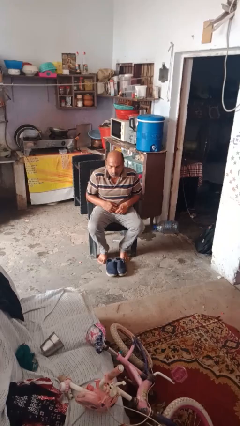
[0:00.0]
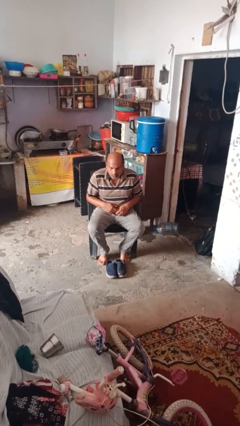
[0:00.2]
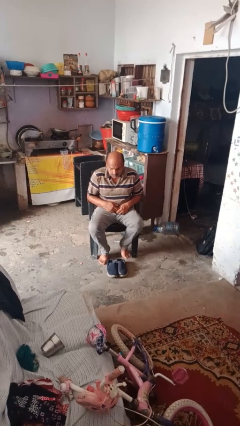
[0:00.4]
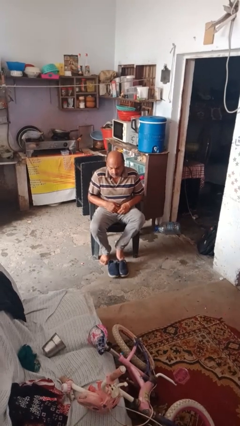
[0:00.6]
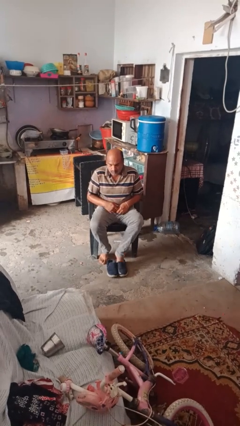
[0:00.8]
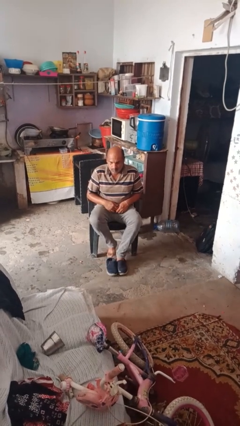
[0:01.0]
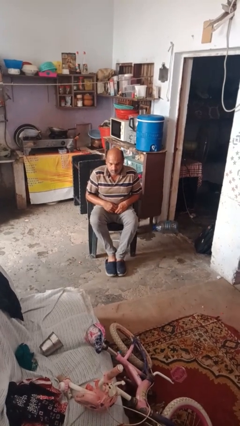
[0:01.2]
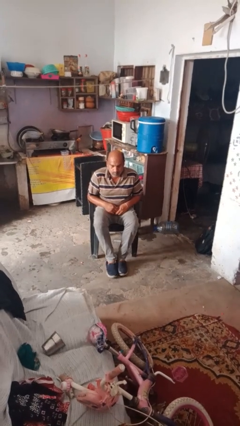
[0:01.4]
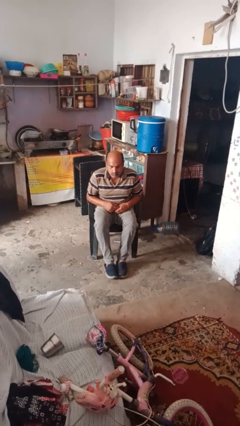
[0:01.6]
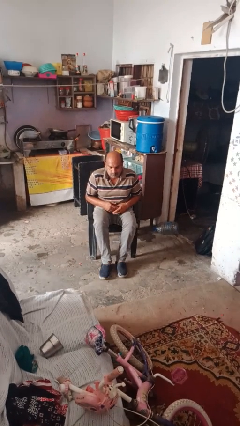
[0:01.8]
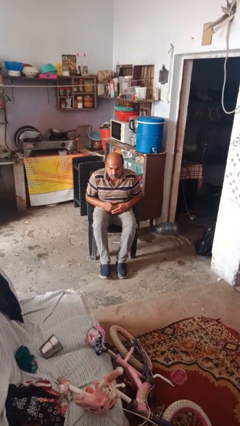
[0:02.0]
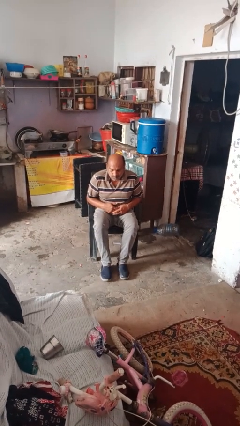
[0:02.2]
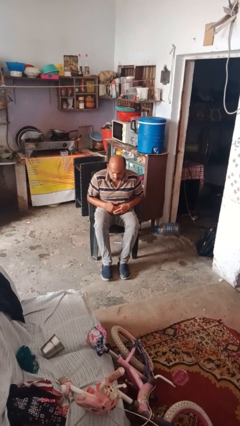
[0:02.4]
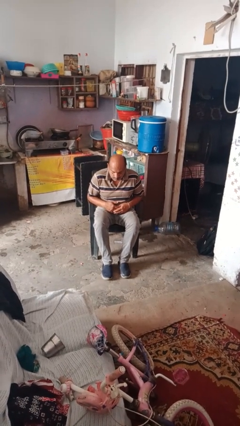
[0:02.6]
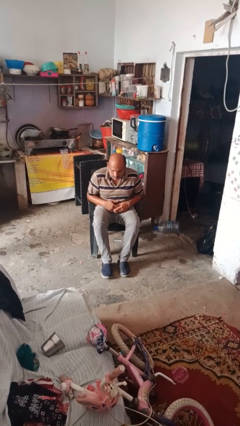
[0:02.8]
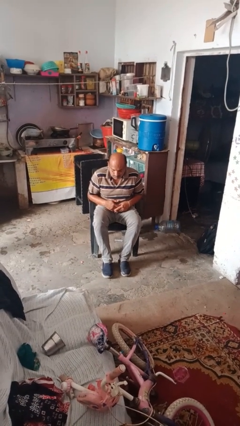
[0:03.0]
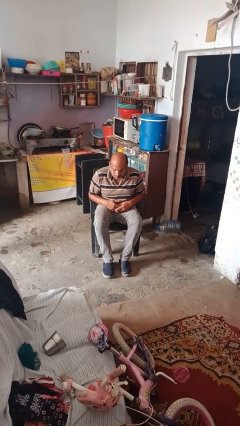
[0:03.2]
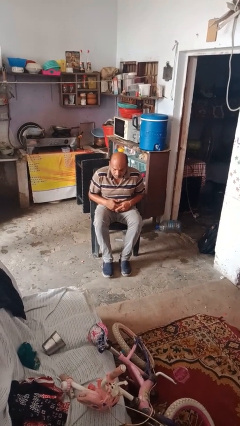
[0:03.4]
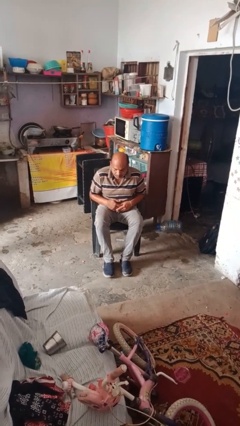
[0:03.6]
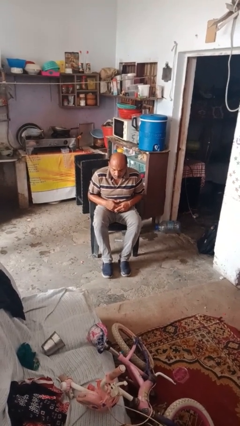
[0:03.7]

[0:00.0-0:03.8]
person puts on shoes

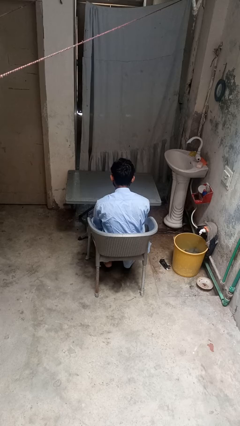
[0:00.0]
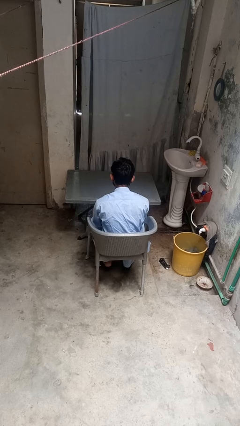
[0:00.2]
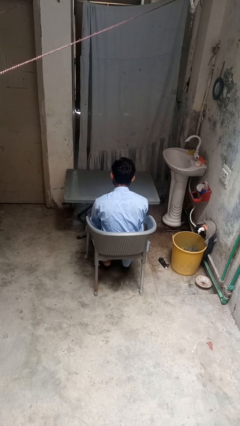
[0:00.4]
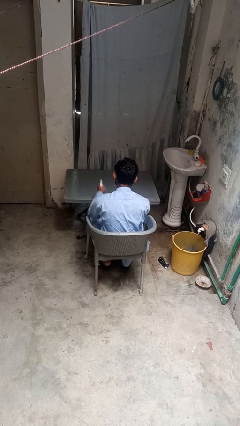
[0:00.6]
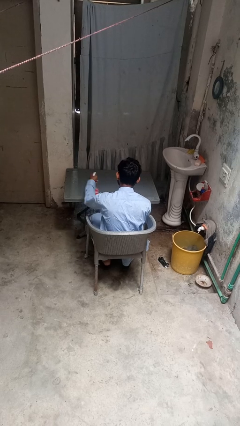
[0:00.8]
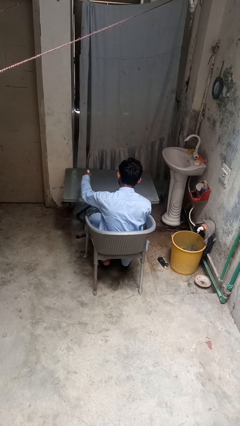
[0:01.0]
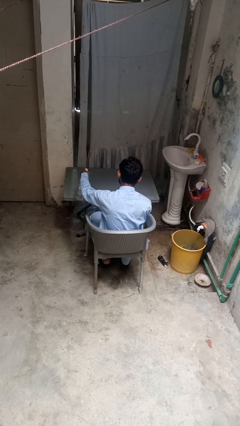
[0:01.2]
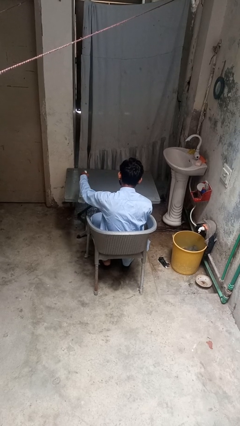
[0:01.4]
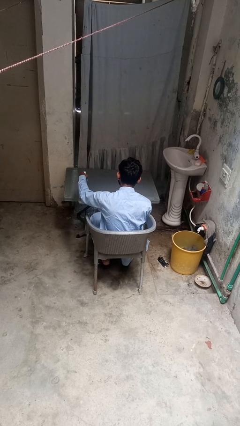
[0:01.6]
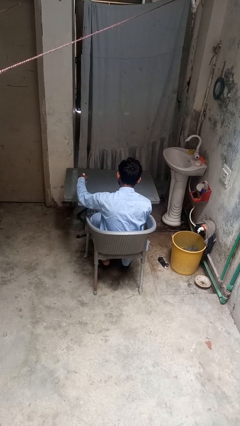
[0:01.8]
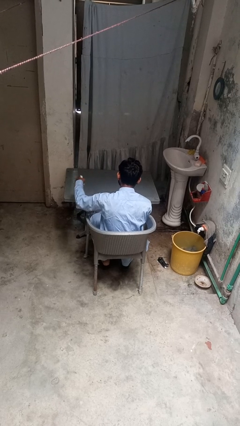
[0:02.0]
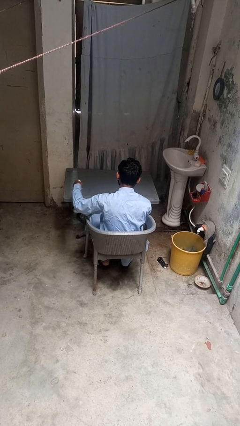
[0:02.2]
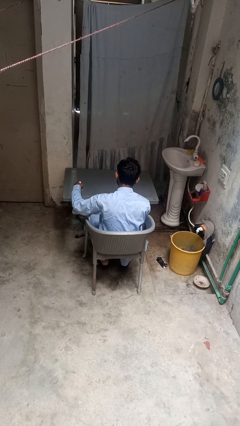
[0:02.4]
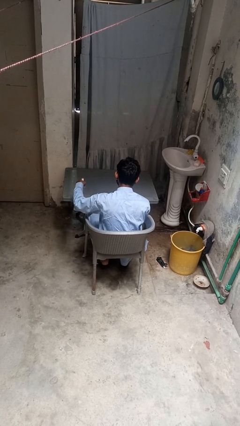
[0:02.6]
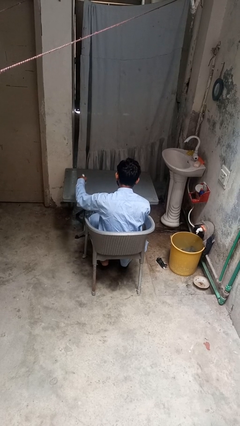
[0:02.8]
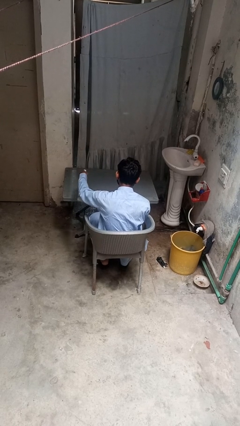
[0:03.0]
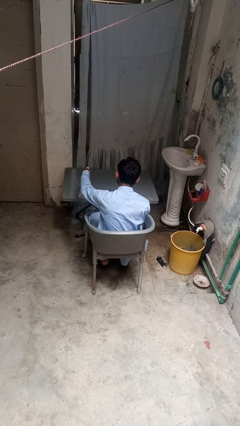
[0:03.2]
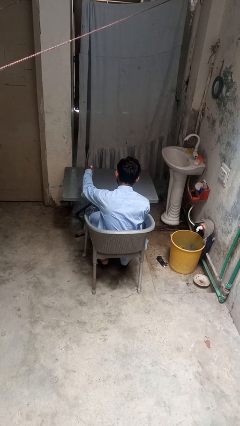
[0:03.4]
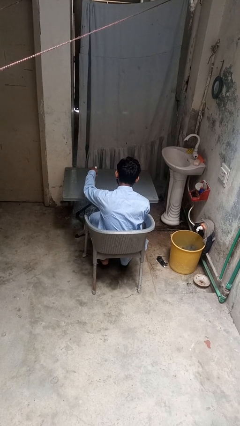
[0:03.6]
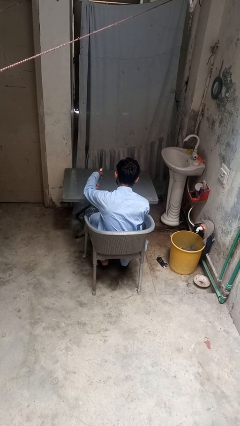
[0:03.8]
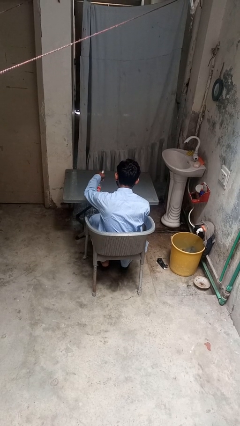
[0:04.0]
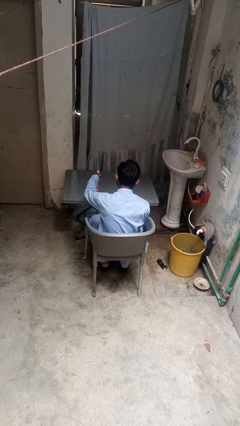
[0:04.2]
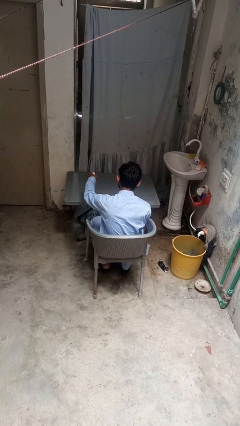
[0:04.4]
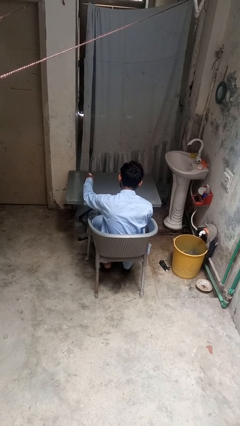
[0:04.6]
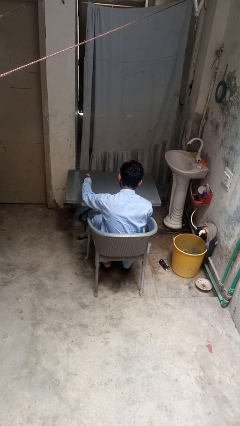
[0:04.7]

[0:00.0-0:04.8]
person sprays from bottle

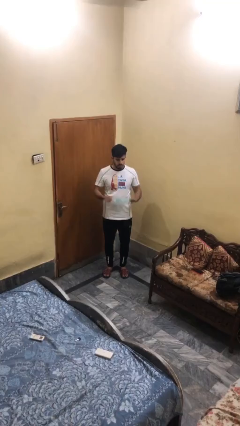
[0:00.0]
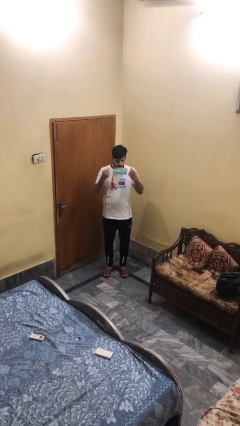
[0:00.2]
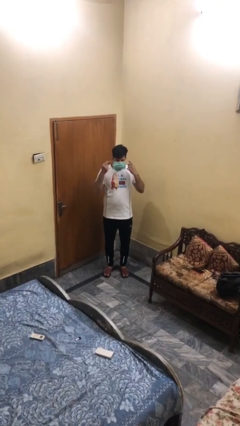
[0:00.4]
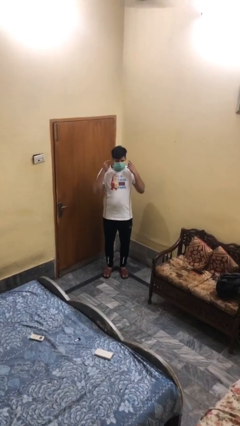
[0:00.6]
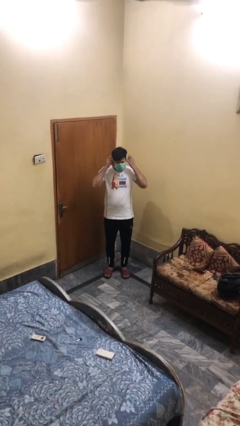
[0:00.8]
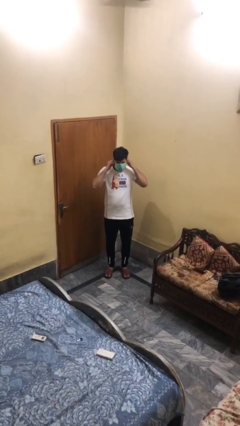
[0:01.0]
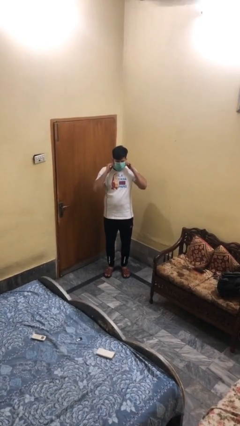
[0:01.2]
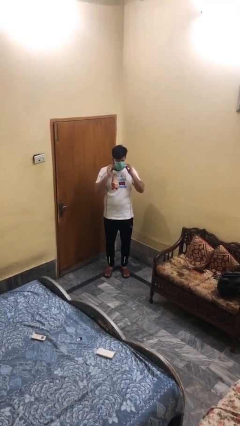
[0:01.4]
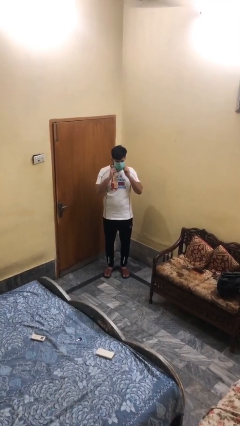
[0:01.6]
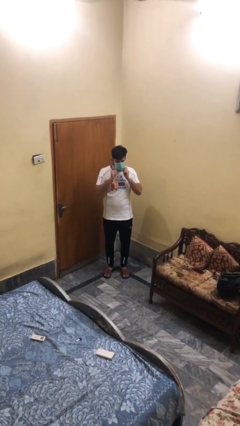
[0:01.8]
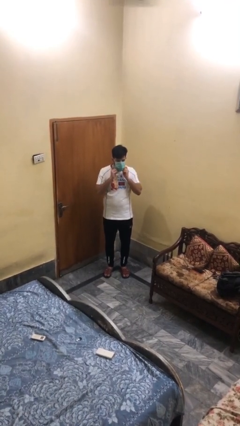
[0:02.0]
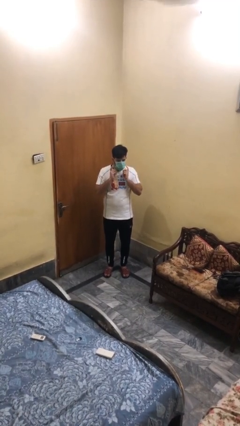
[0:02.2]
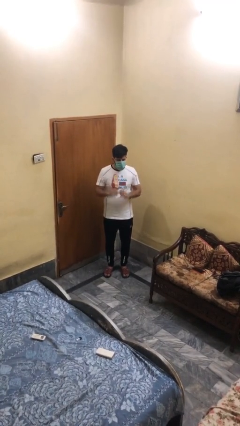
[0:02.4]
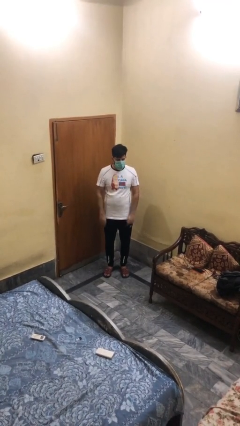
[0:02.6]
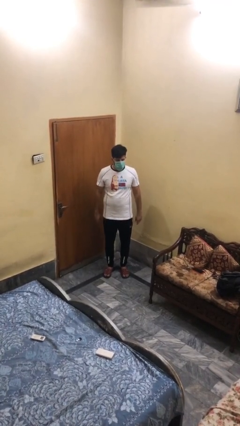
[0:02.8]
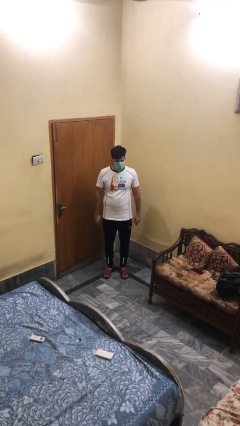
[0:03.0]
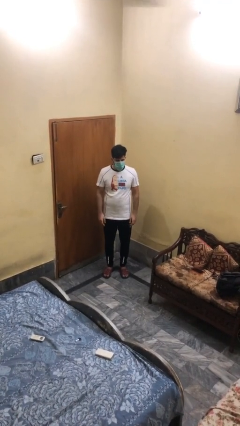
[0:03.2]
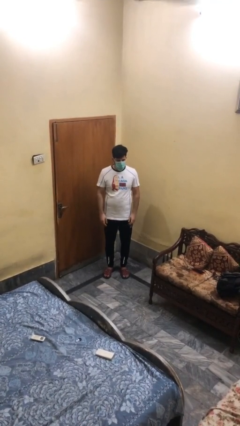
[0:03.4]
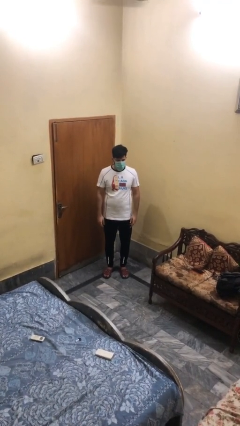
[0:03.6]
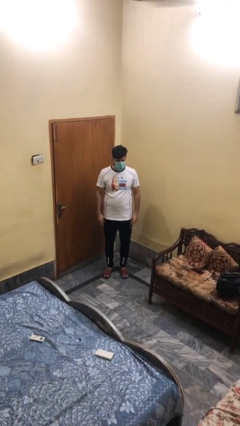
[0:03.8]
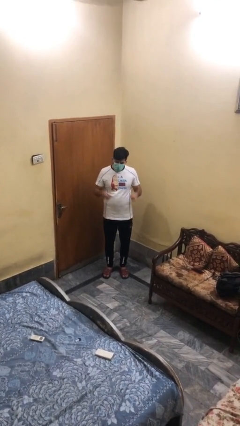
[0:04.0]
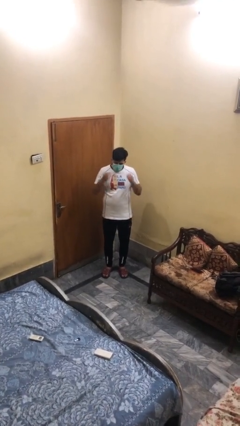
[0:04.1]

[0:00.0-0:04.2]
person puts on facemask

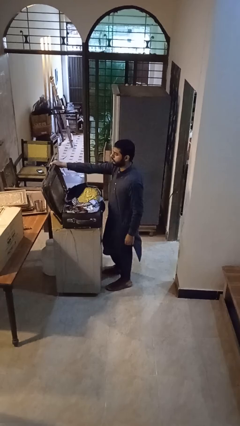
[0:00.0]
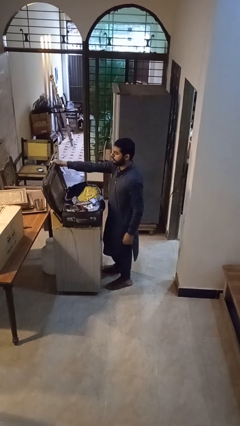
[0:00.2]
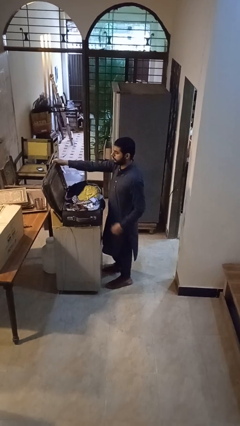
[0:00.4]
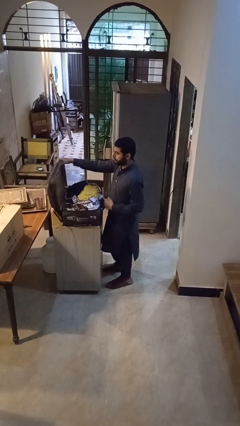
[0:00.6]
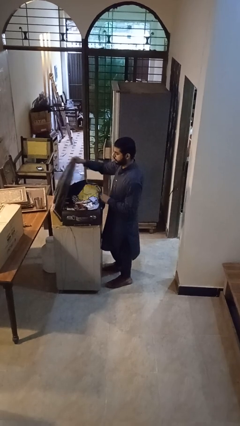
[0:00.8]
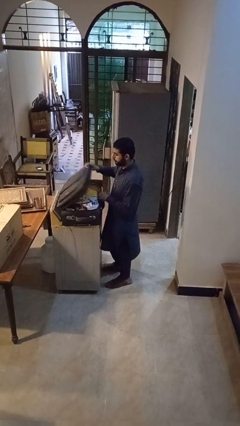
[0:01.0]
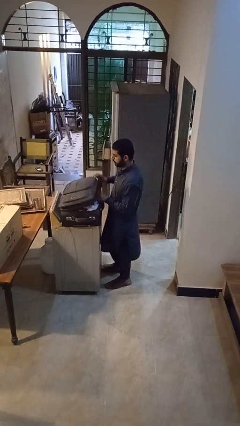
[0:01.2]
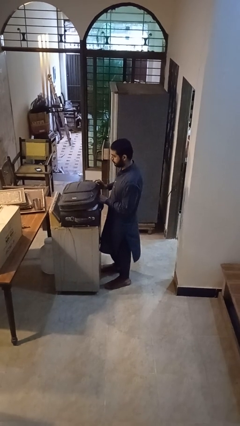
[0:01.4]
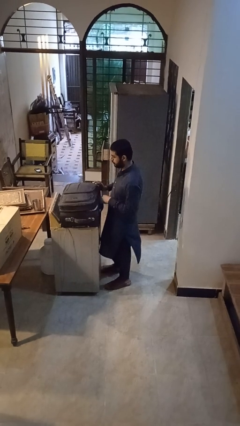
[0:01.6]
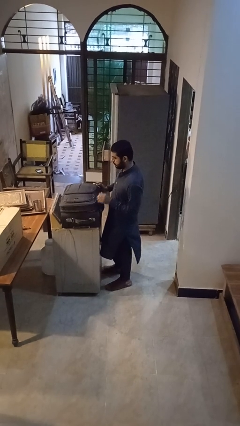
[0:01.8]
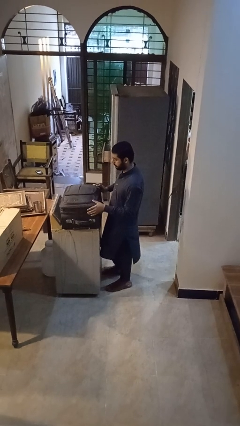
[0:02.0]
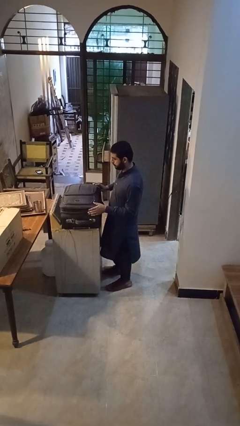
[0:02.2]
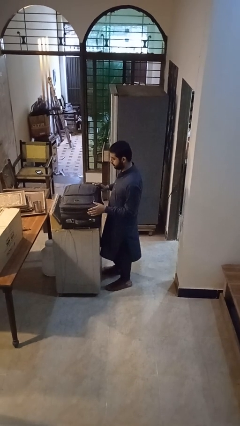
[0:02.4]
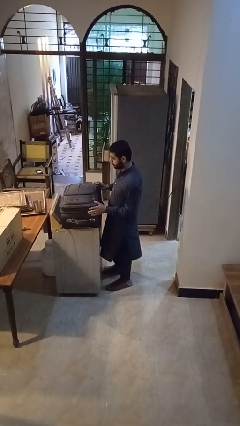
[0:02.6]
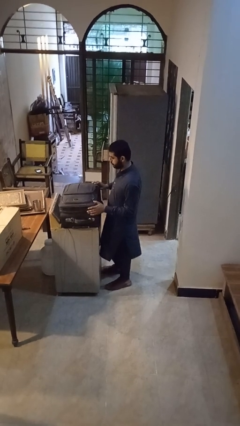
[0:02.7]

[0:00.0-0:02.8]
person closes suitcase

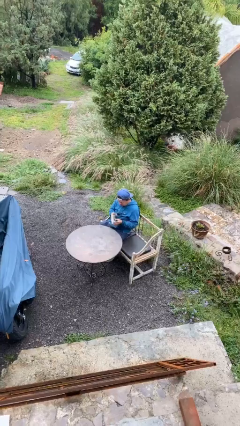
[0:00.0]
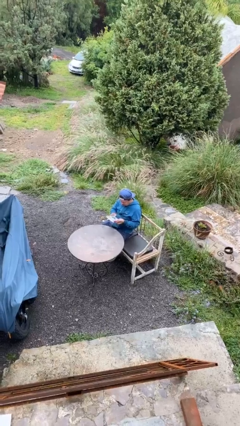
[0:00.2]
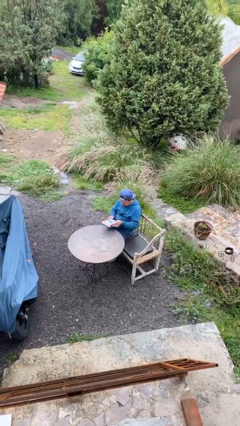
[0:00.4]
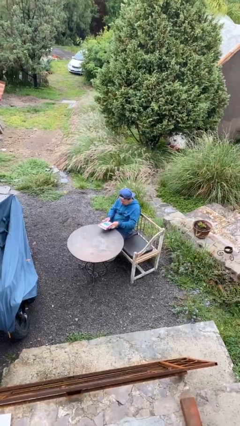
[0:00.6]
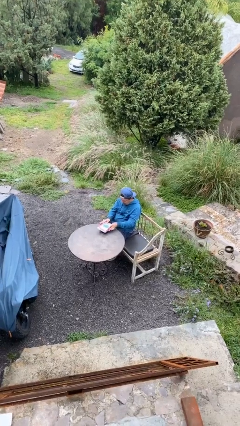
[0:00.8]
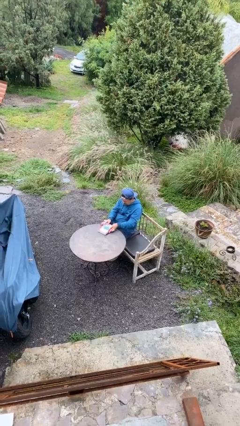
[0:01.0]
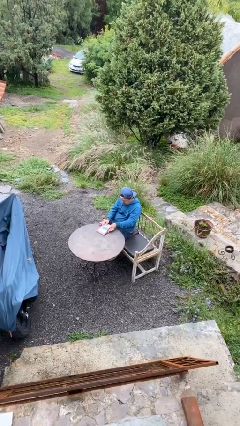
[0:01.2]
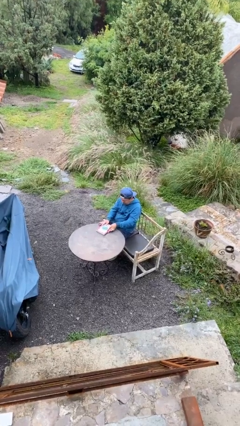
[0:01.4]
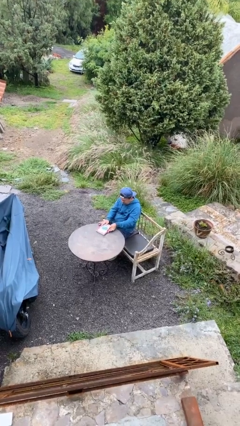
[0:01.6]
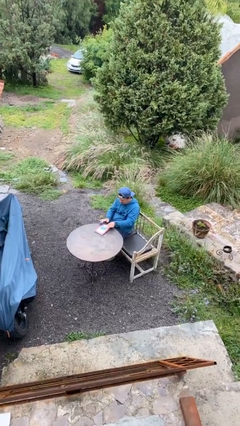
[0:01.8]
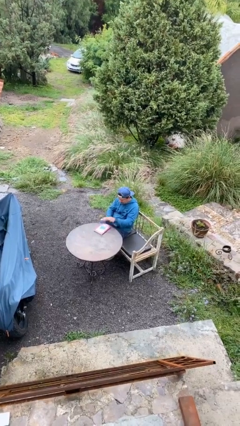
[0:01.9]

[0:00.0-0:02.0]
person puts down object on table
